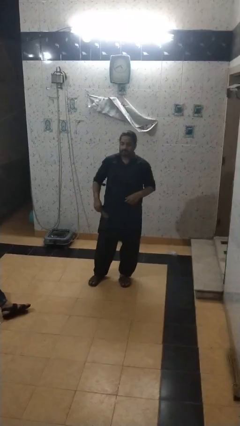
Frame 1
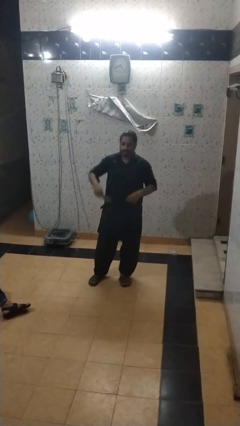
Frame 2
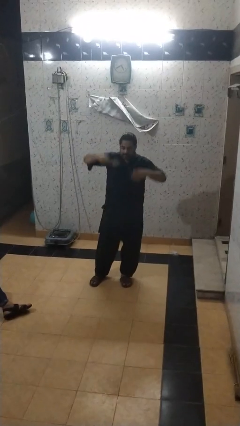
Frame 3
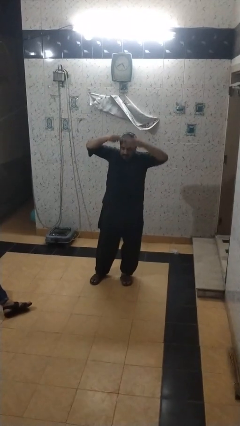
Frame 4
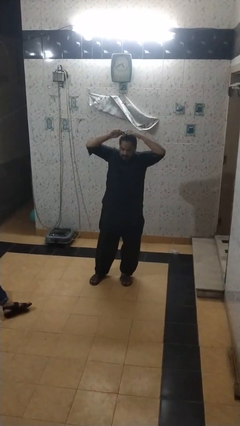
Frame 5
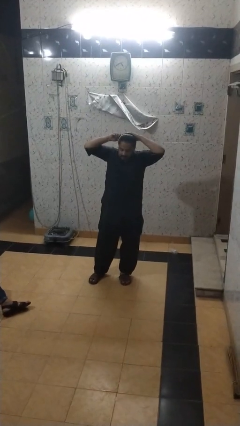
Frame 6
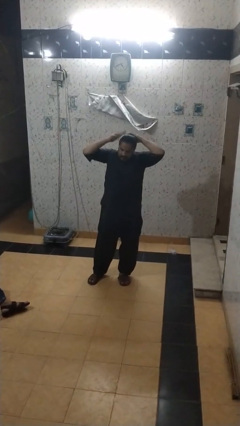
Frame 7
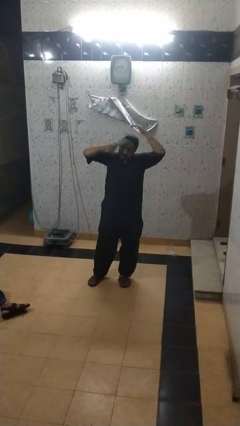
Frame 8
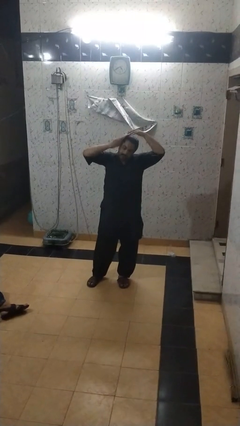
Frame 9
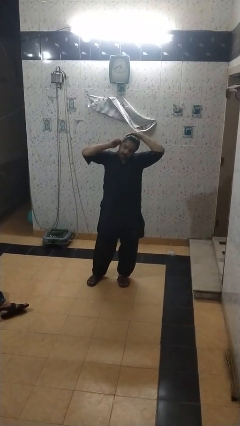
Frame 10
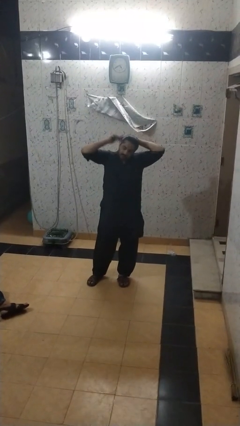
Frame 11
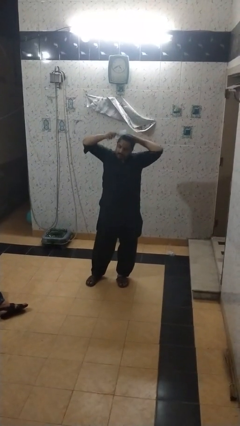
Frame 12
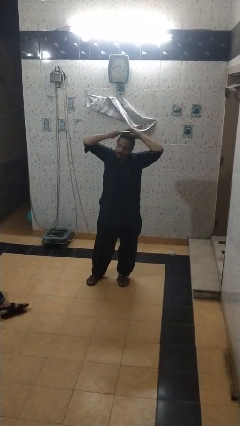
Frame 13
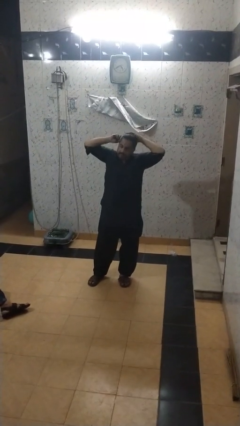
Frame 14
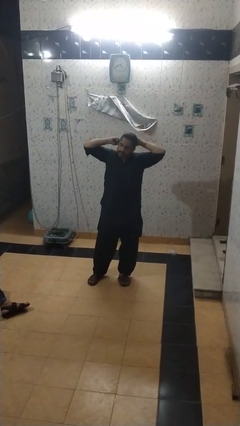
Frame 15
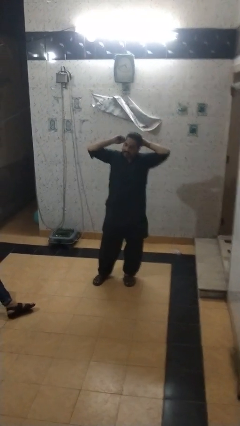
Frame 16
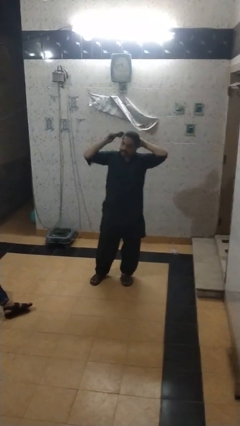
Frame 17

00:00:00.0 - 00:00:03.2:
person brushes hair

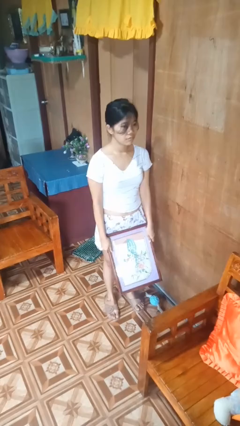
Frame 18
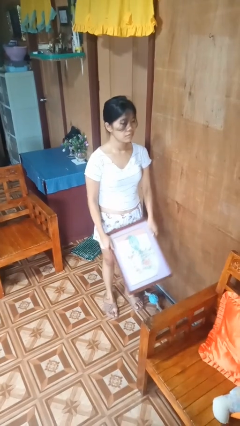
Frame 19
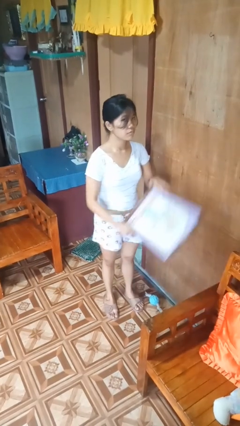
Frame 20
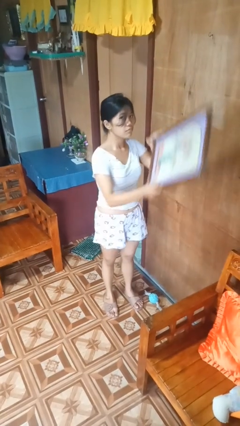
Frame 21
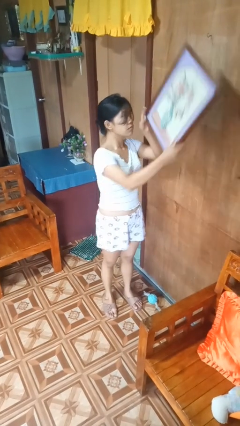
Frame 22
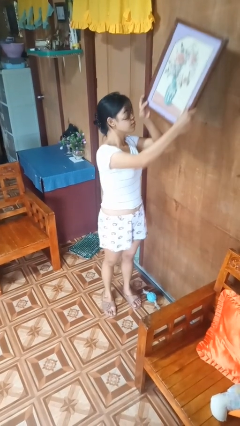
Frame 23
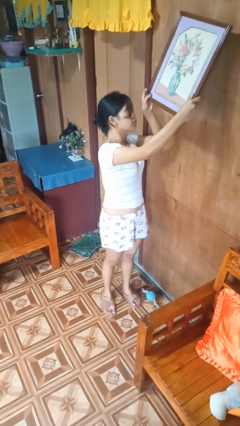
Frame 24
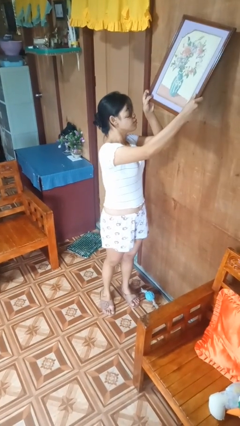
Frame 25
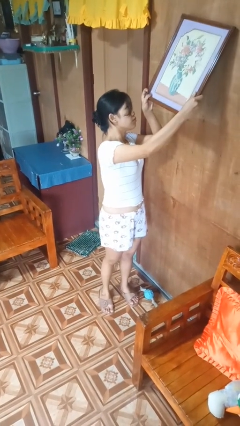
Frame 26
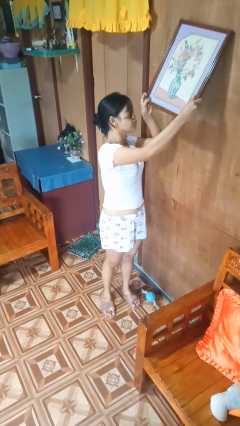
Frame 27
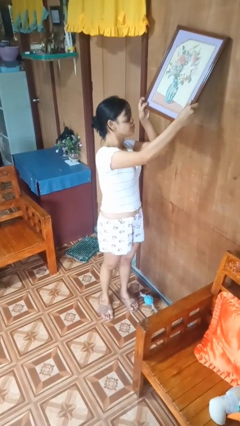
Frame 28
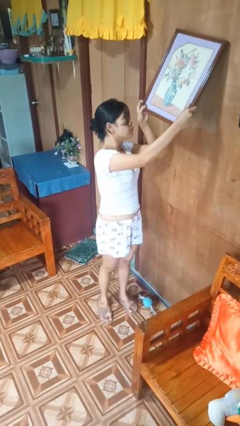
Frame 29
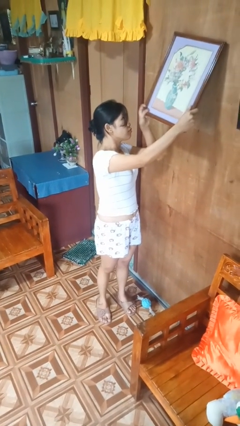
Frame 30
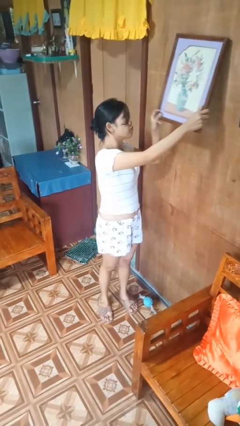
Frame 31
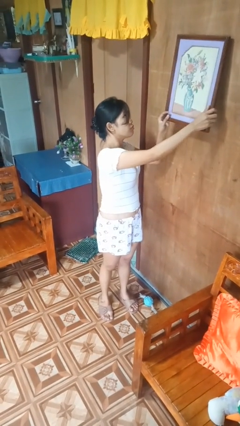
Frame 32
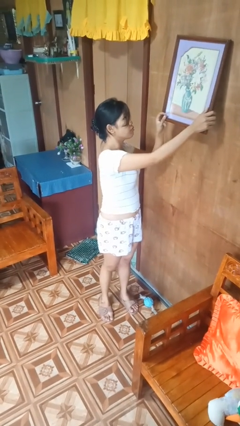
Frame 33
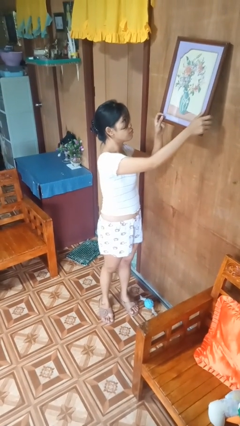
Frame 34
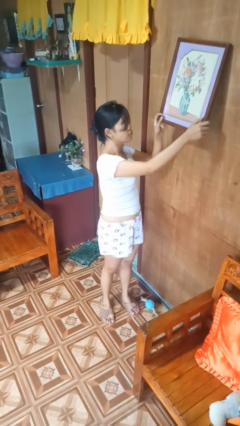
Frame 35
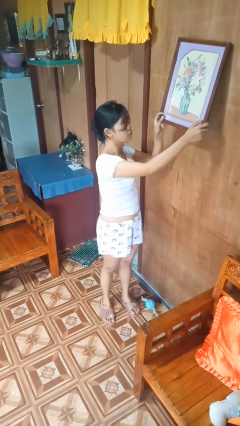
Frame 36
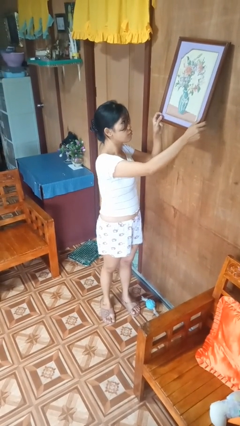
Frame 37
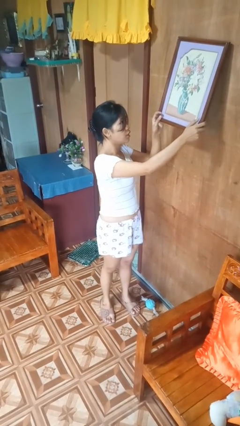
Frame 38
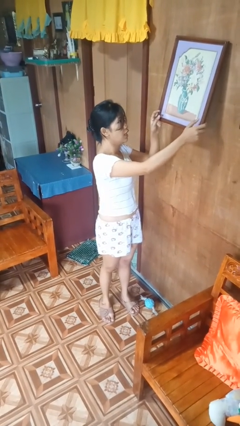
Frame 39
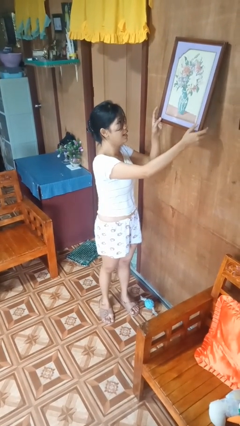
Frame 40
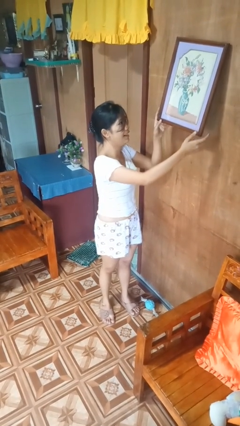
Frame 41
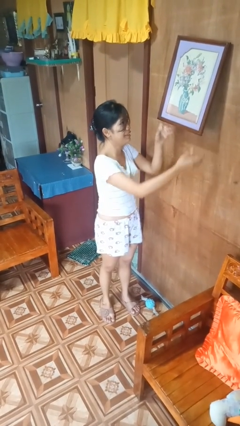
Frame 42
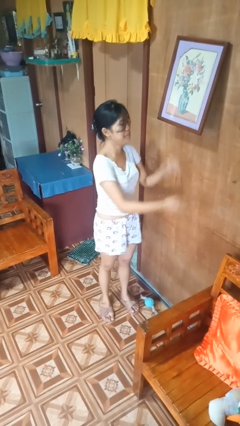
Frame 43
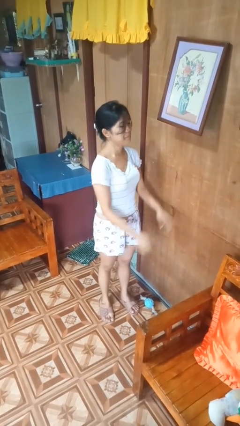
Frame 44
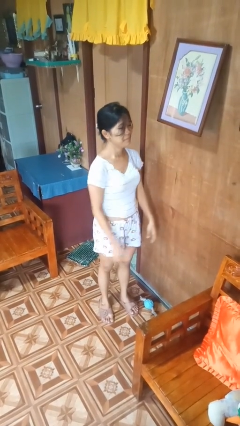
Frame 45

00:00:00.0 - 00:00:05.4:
person puts up picture frame

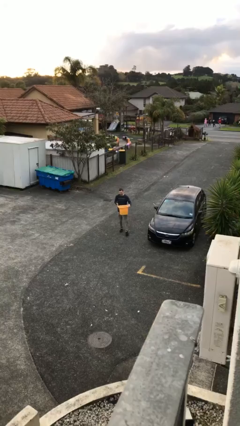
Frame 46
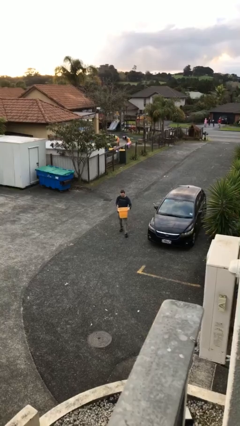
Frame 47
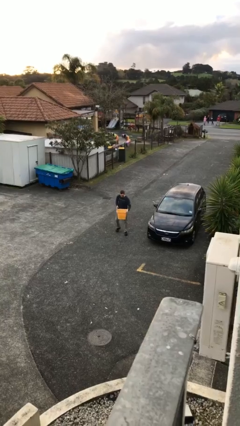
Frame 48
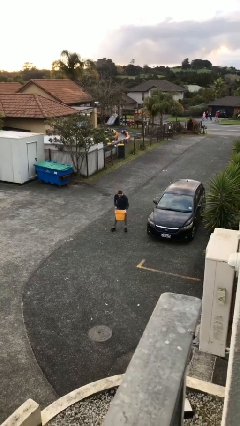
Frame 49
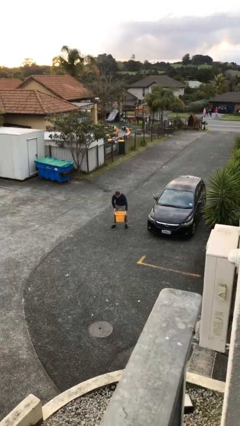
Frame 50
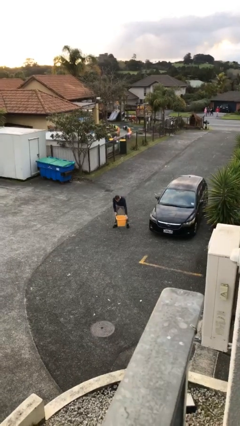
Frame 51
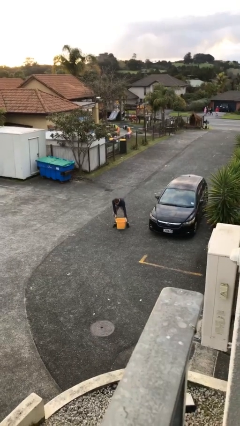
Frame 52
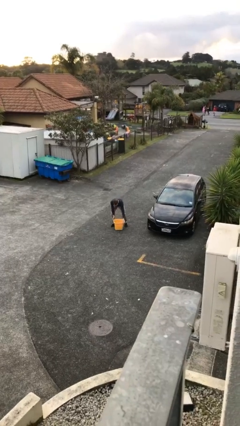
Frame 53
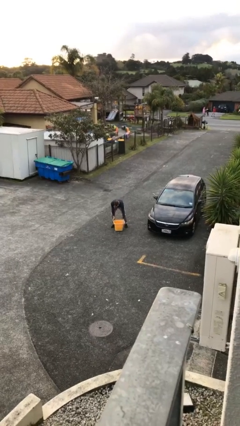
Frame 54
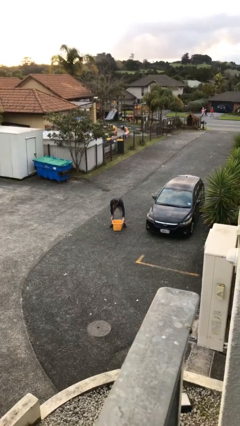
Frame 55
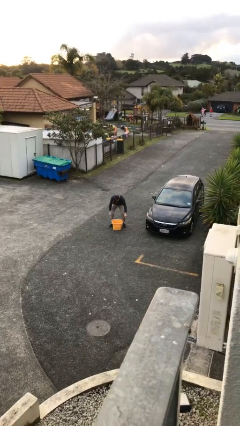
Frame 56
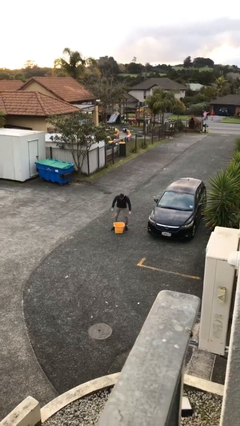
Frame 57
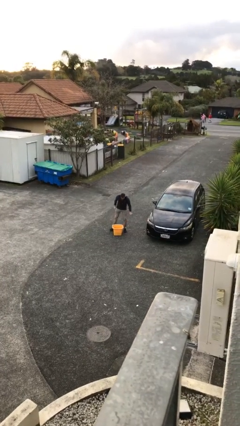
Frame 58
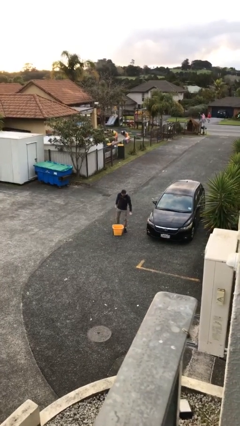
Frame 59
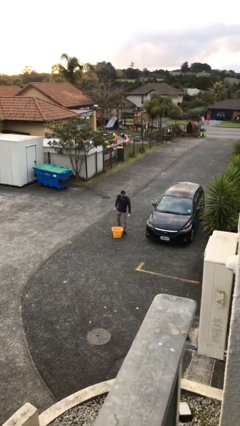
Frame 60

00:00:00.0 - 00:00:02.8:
person puts down object on floor

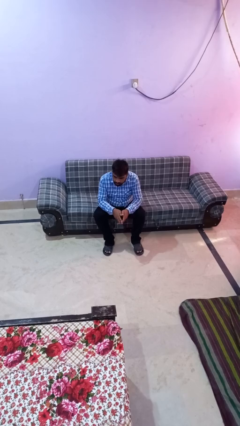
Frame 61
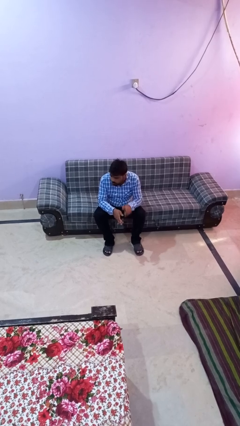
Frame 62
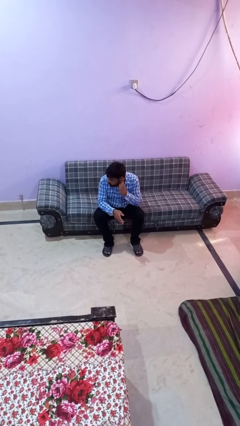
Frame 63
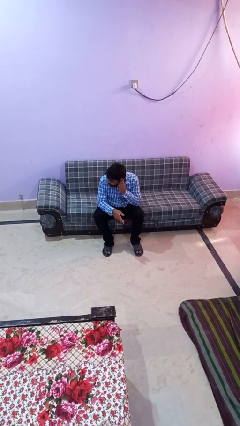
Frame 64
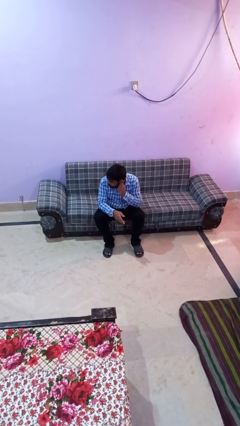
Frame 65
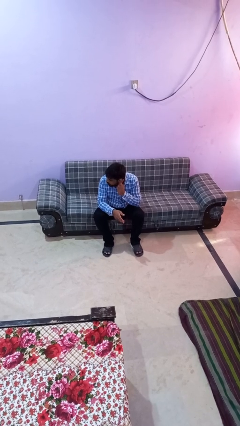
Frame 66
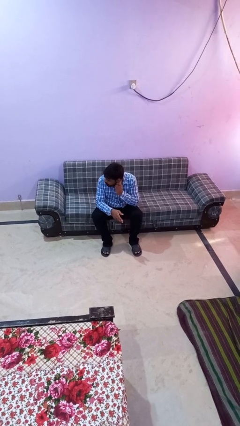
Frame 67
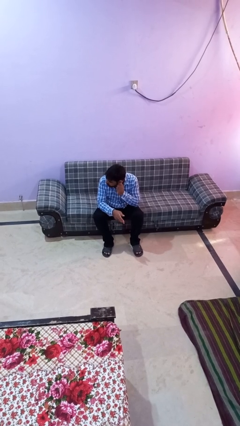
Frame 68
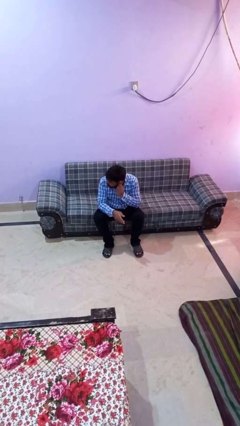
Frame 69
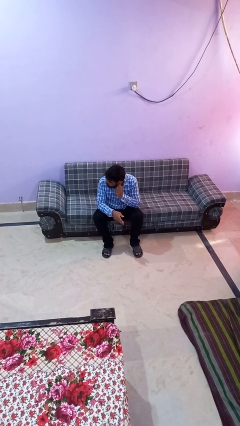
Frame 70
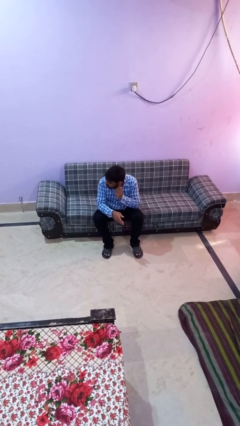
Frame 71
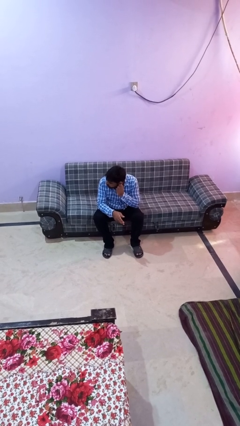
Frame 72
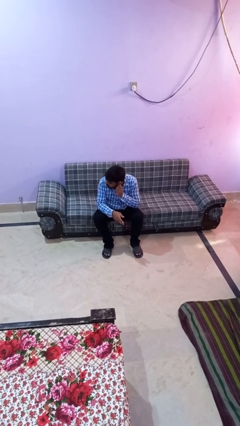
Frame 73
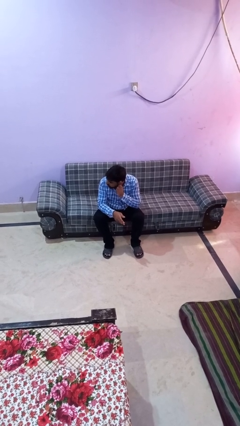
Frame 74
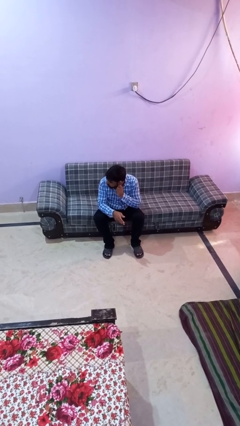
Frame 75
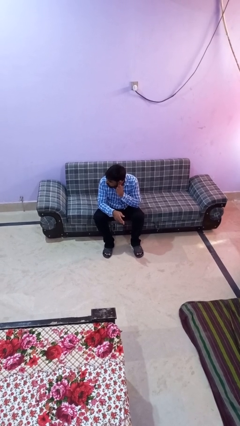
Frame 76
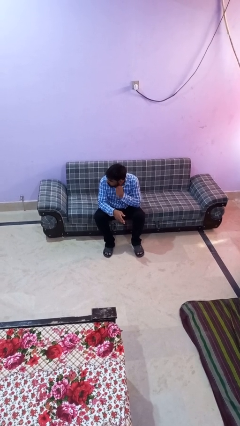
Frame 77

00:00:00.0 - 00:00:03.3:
person touches earlobe

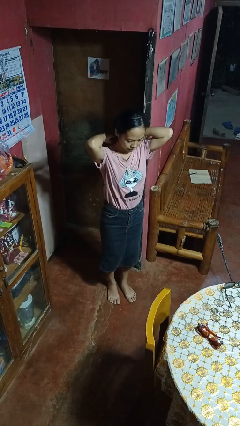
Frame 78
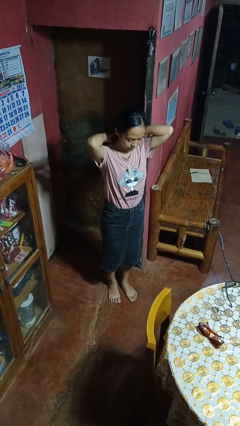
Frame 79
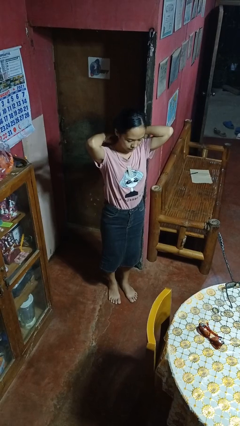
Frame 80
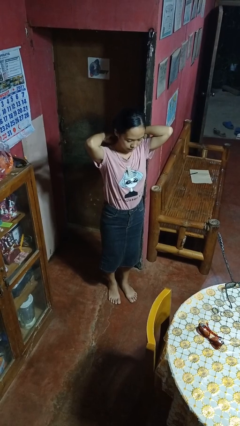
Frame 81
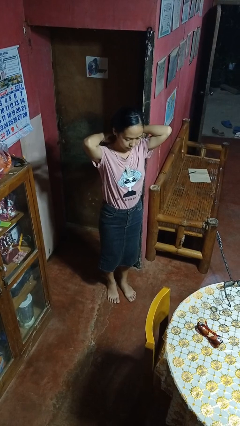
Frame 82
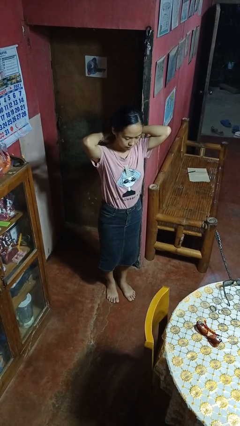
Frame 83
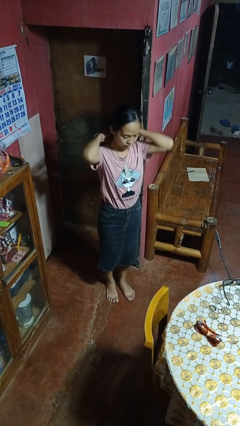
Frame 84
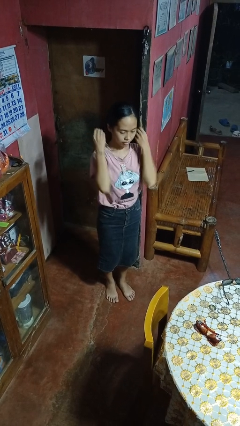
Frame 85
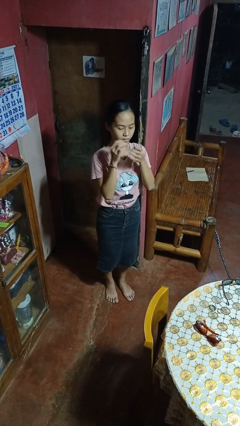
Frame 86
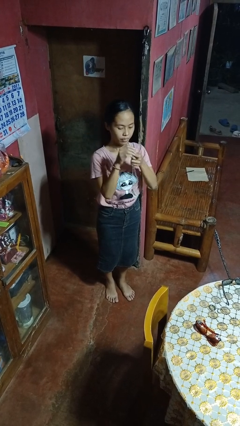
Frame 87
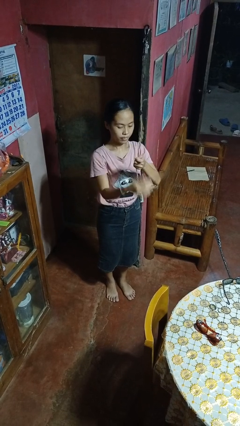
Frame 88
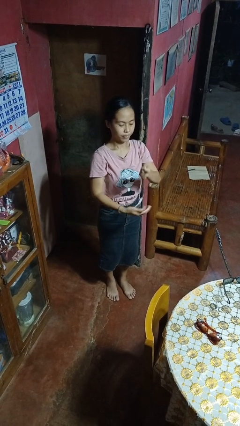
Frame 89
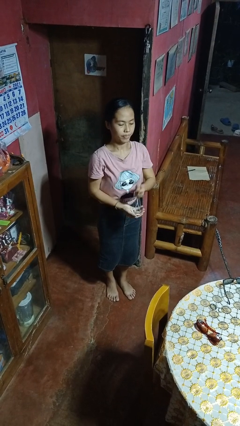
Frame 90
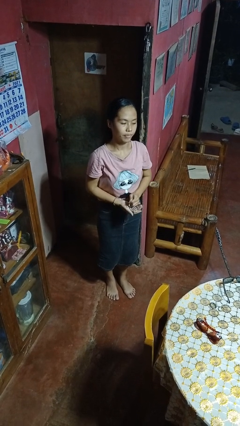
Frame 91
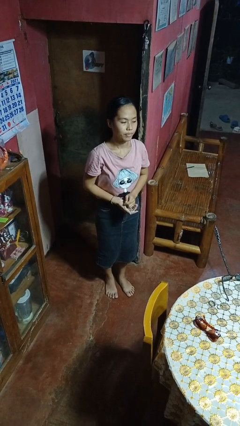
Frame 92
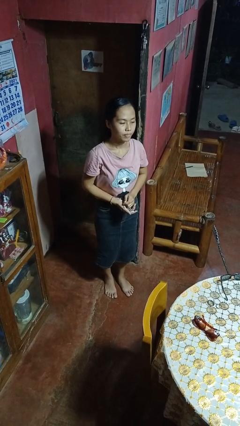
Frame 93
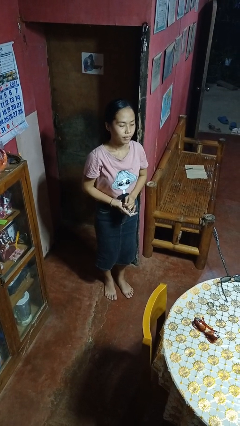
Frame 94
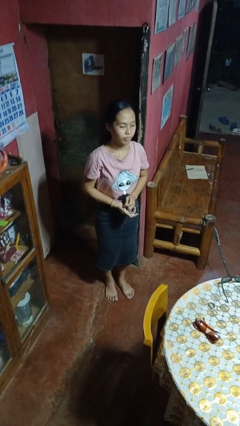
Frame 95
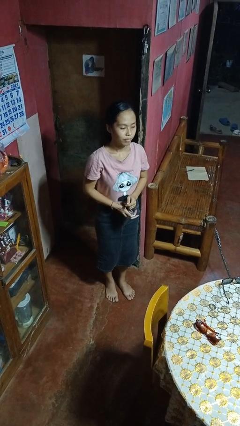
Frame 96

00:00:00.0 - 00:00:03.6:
person takes off necklace
